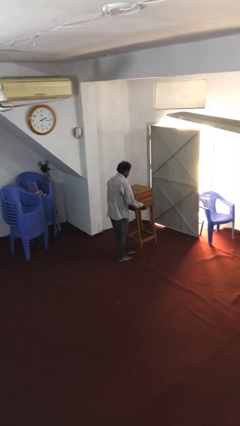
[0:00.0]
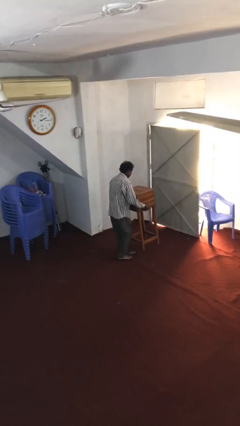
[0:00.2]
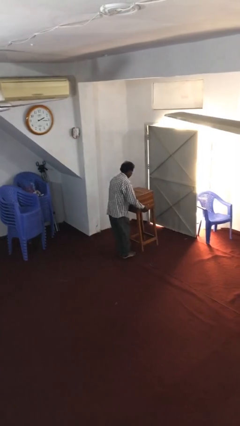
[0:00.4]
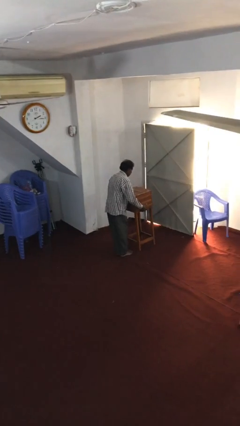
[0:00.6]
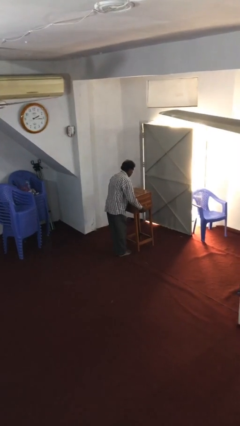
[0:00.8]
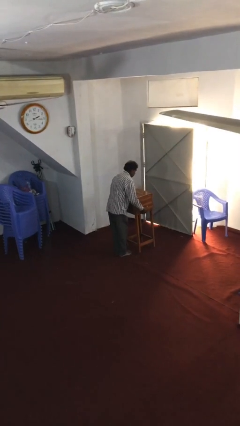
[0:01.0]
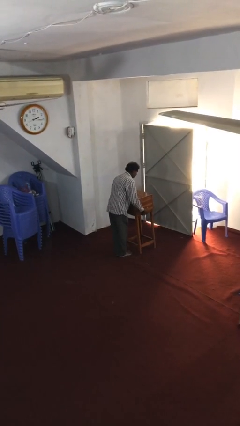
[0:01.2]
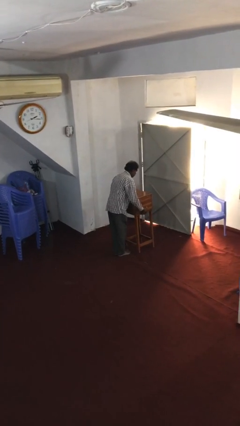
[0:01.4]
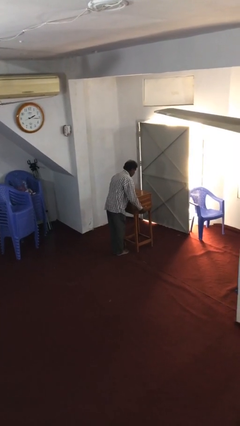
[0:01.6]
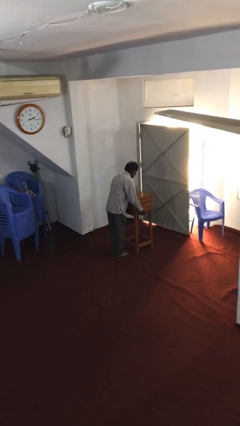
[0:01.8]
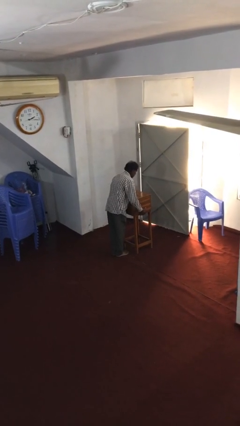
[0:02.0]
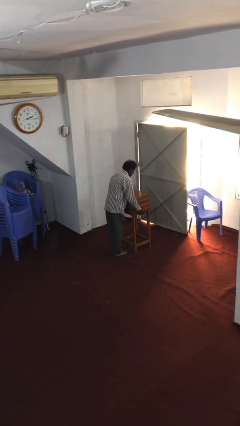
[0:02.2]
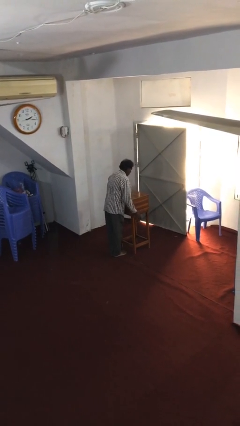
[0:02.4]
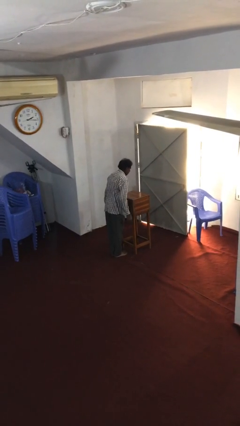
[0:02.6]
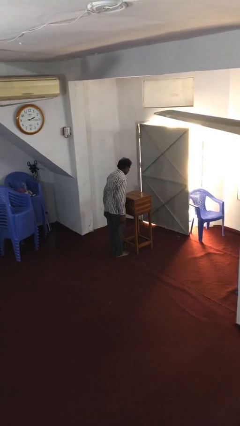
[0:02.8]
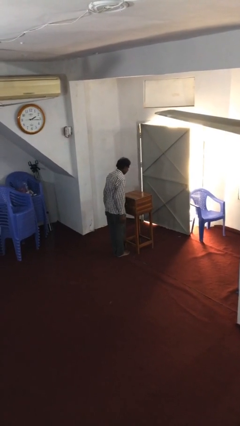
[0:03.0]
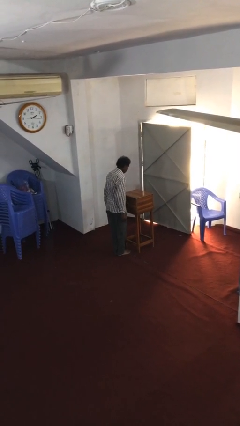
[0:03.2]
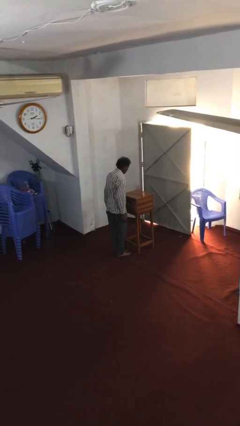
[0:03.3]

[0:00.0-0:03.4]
person puts down object on floor

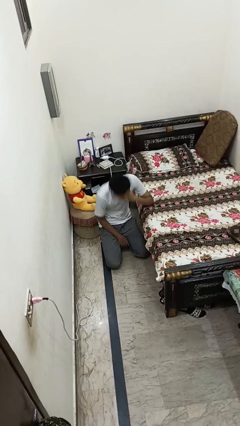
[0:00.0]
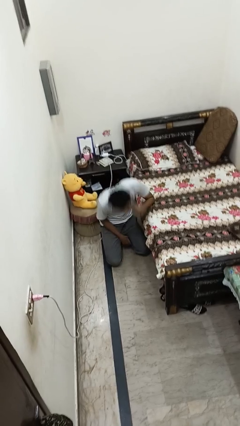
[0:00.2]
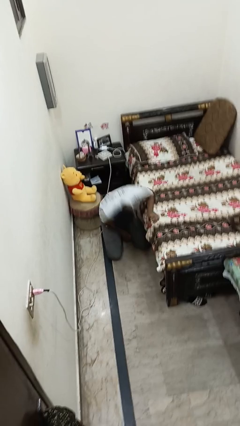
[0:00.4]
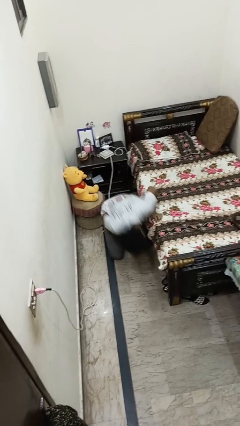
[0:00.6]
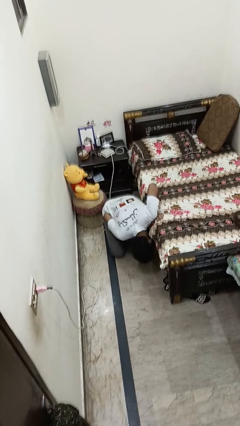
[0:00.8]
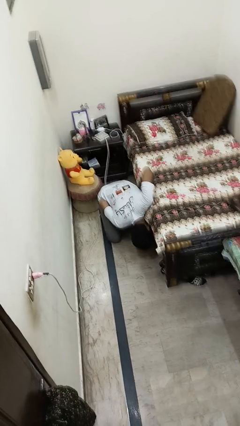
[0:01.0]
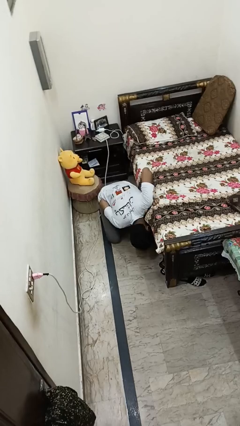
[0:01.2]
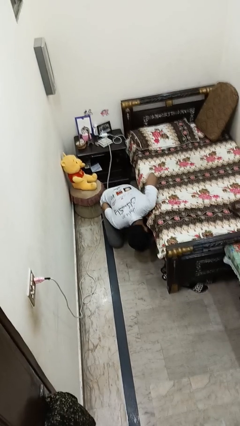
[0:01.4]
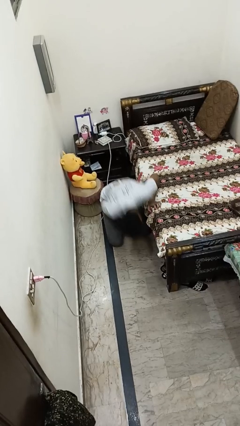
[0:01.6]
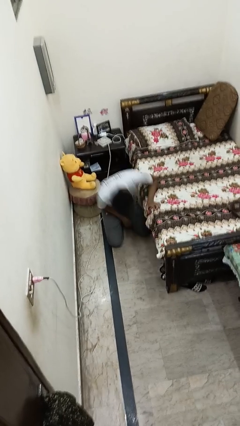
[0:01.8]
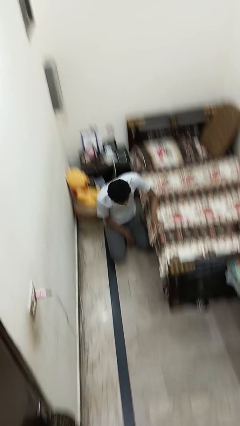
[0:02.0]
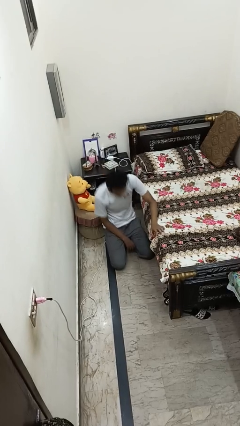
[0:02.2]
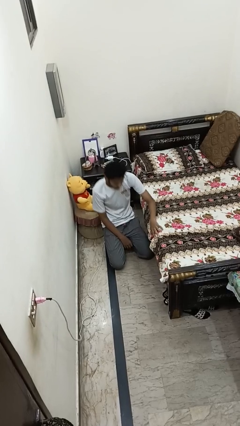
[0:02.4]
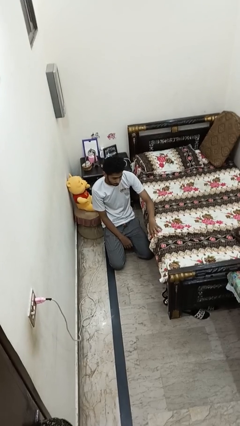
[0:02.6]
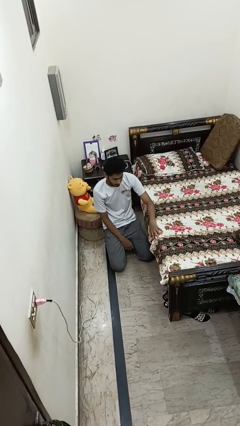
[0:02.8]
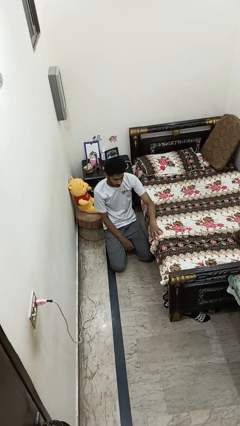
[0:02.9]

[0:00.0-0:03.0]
person searches under bed

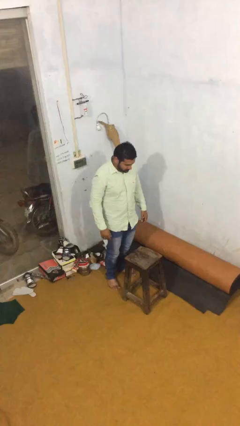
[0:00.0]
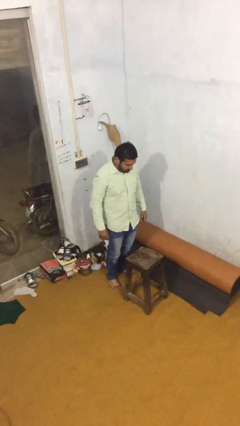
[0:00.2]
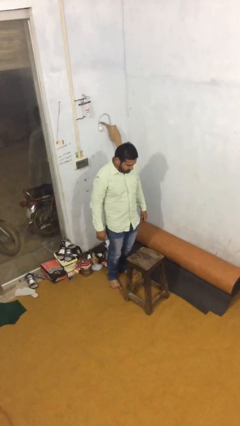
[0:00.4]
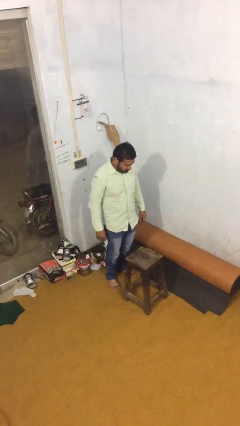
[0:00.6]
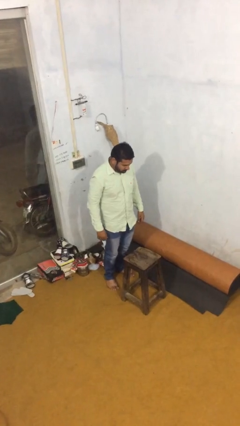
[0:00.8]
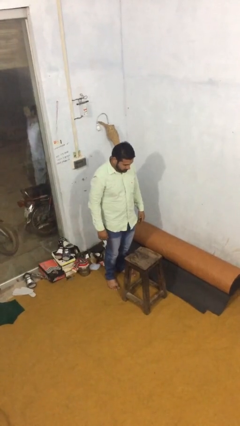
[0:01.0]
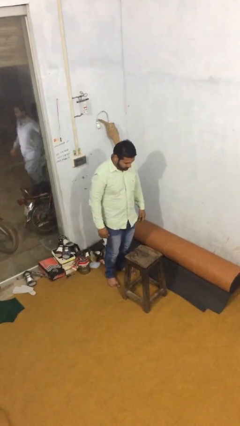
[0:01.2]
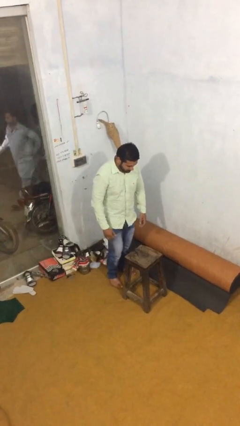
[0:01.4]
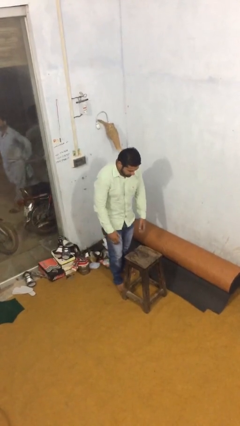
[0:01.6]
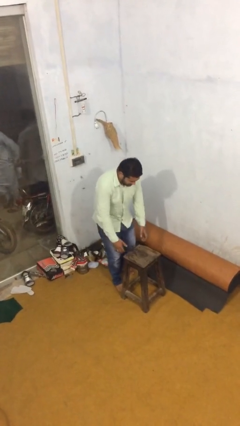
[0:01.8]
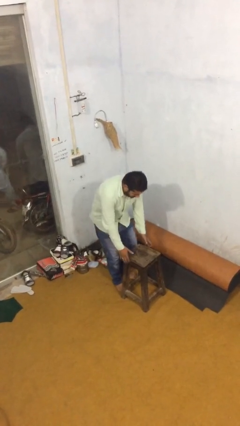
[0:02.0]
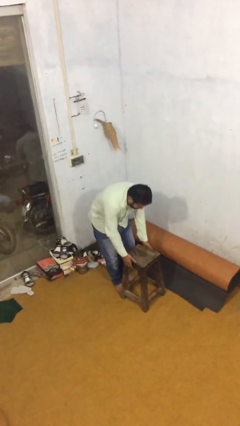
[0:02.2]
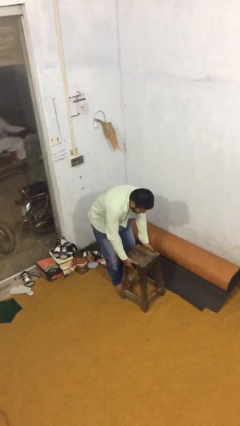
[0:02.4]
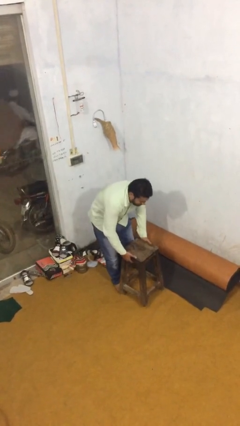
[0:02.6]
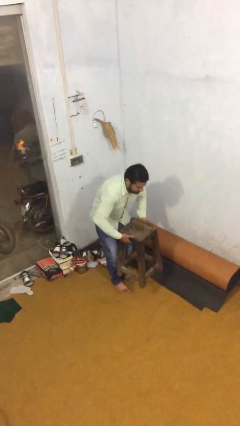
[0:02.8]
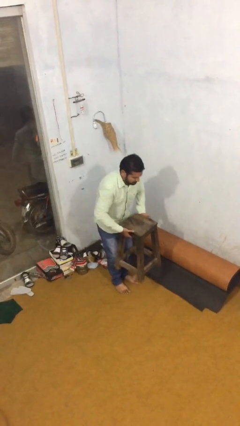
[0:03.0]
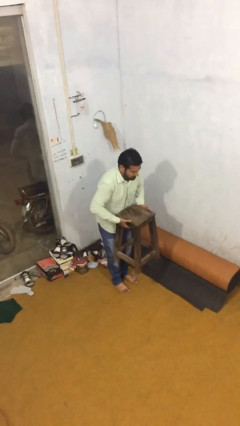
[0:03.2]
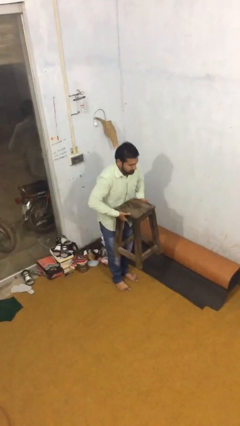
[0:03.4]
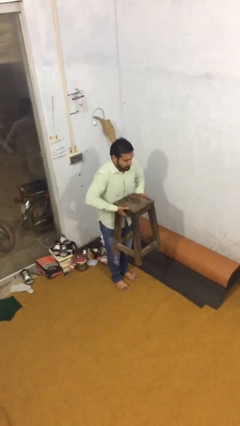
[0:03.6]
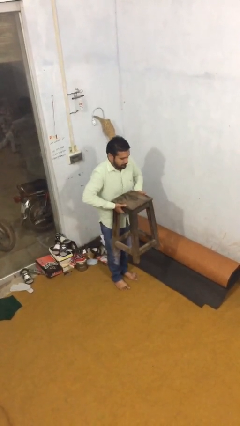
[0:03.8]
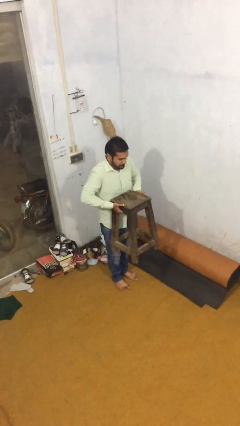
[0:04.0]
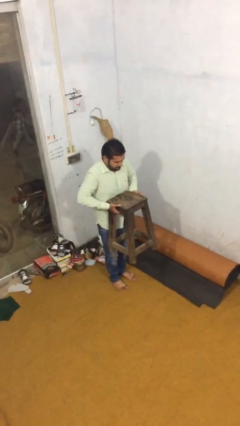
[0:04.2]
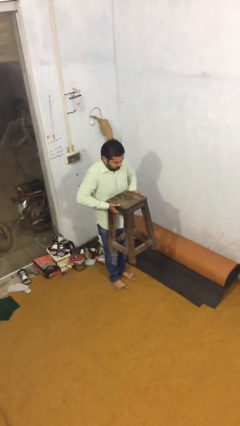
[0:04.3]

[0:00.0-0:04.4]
person picks up object from floor

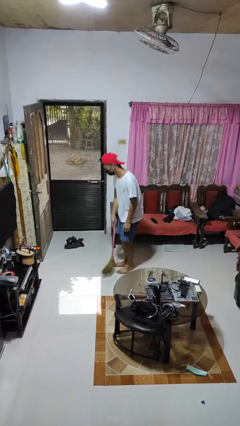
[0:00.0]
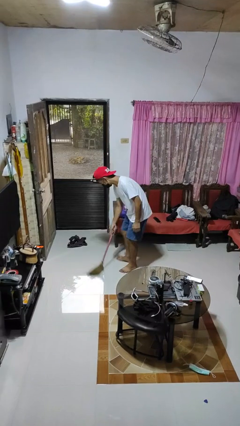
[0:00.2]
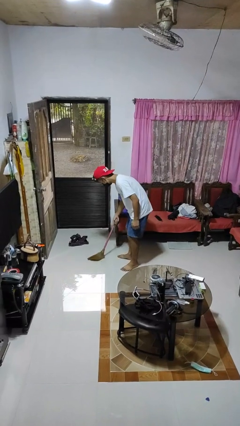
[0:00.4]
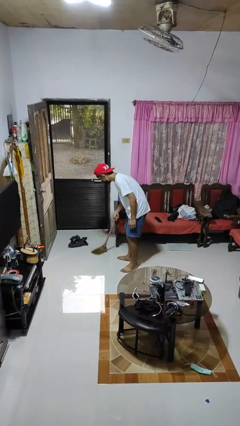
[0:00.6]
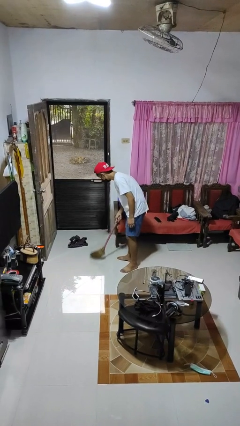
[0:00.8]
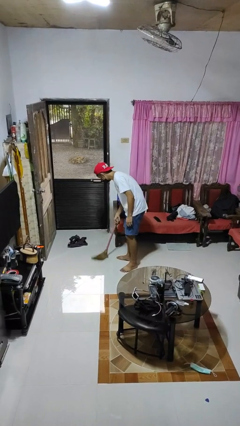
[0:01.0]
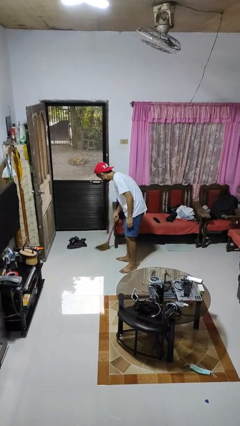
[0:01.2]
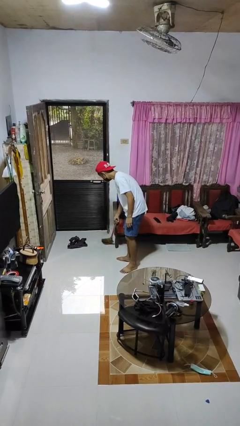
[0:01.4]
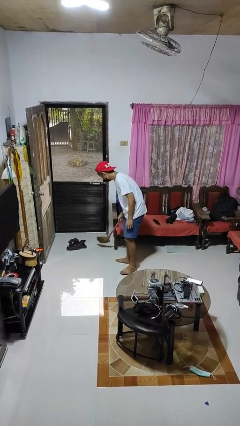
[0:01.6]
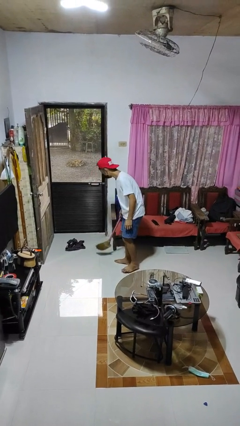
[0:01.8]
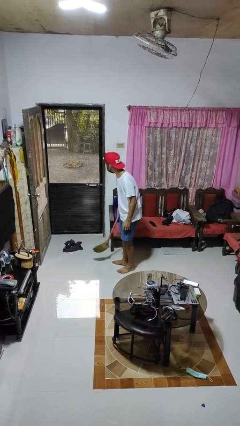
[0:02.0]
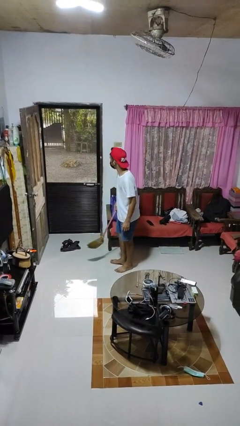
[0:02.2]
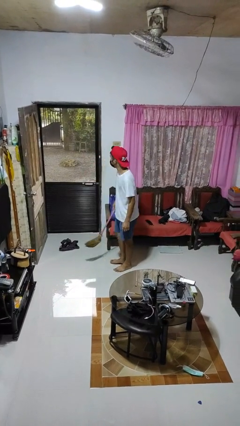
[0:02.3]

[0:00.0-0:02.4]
person sweeps floor

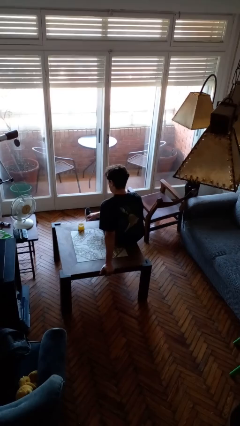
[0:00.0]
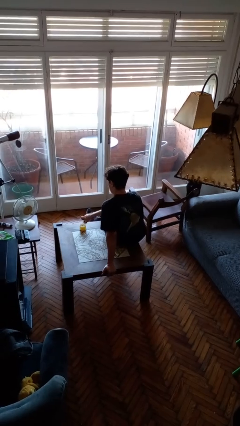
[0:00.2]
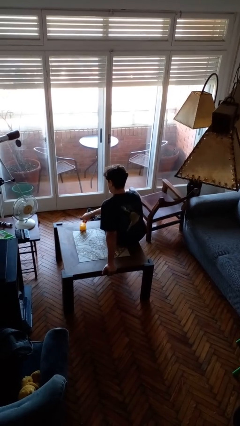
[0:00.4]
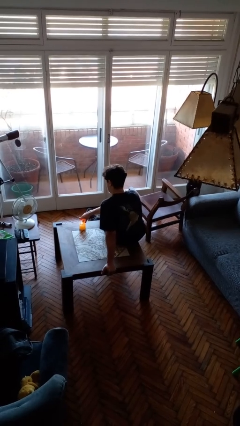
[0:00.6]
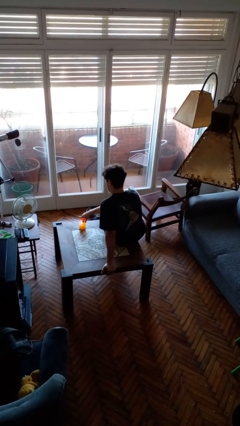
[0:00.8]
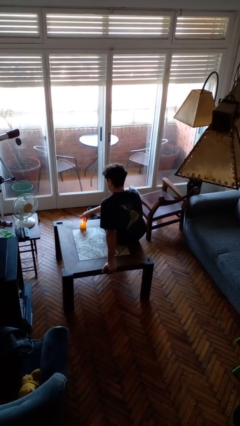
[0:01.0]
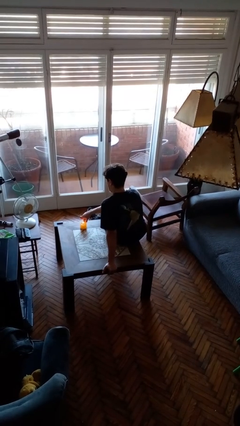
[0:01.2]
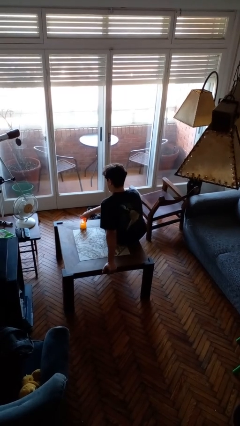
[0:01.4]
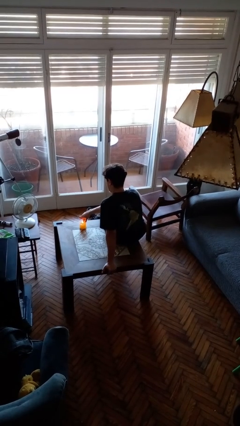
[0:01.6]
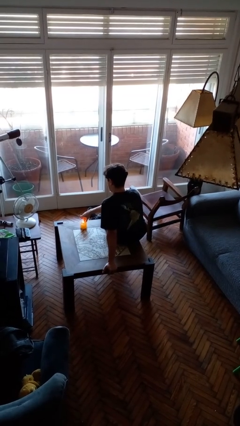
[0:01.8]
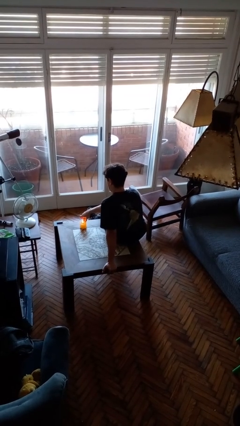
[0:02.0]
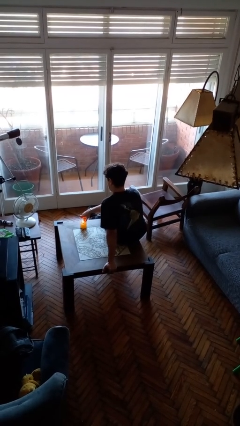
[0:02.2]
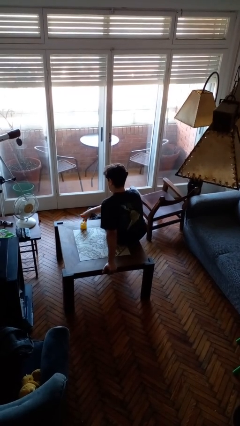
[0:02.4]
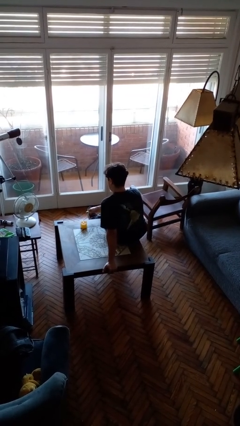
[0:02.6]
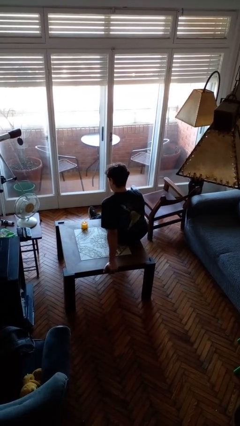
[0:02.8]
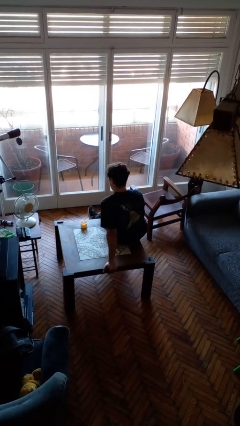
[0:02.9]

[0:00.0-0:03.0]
person lights candle

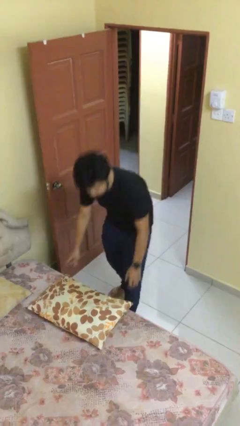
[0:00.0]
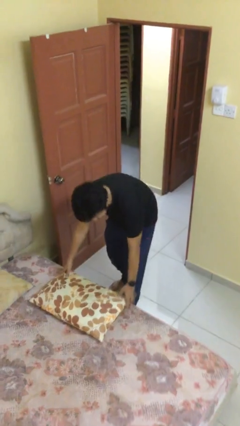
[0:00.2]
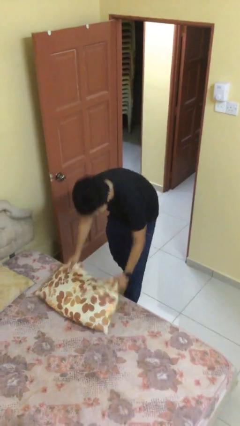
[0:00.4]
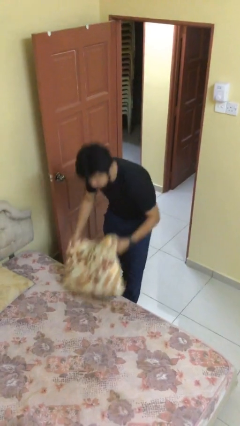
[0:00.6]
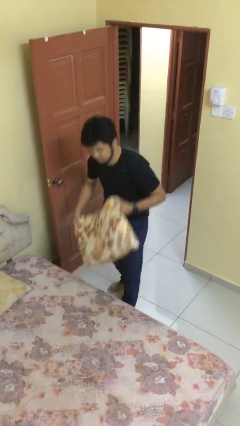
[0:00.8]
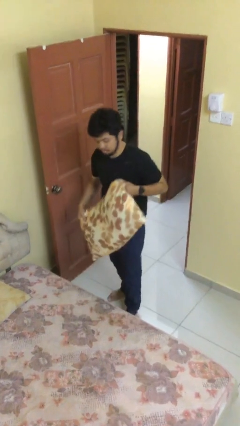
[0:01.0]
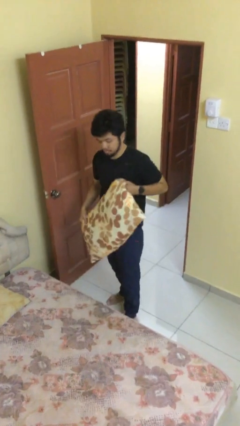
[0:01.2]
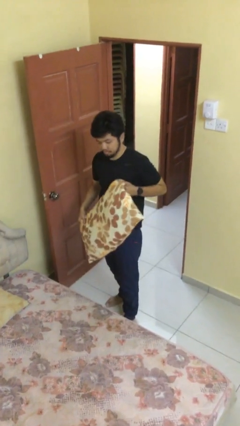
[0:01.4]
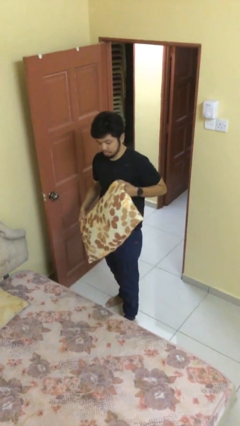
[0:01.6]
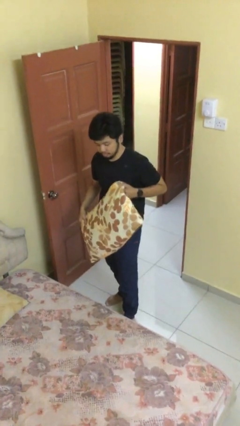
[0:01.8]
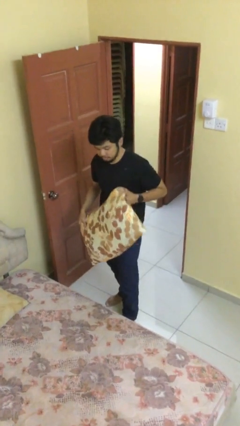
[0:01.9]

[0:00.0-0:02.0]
person picks up object from bed
